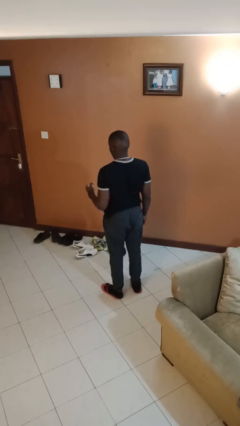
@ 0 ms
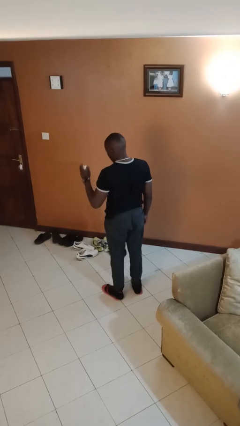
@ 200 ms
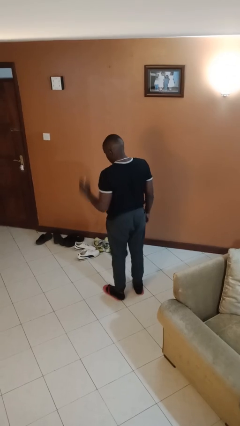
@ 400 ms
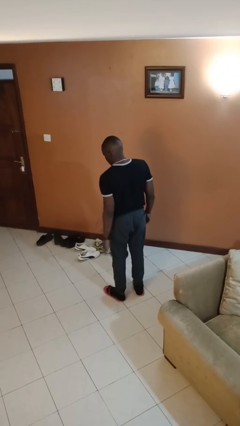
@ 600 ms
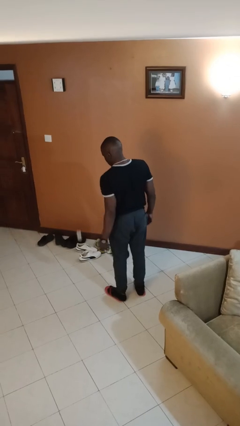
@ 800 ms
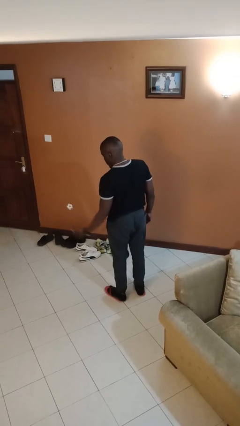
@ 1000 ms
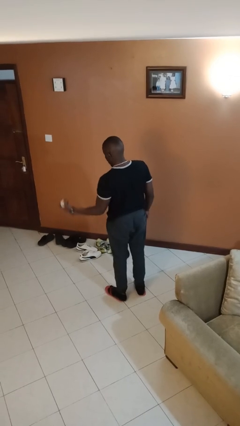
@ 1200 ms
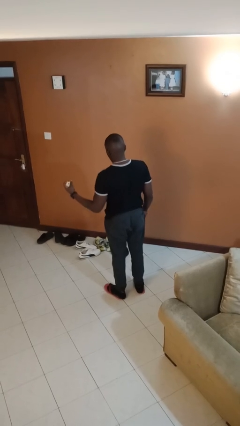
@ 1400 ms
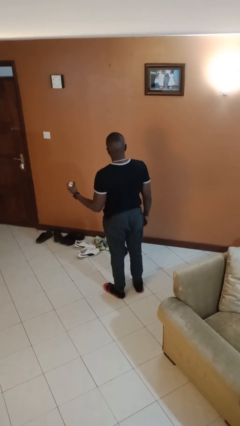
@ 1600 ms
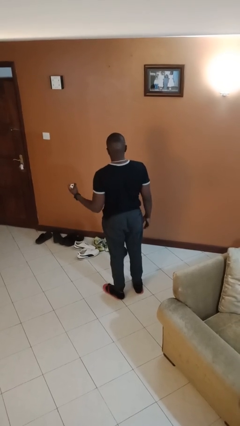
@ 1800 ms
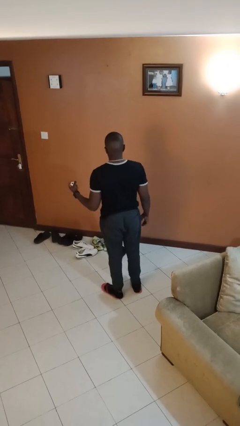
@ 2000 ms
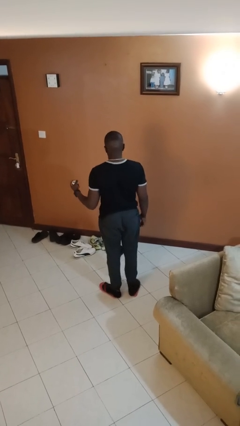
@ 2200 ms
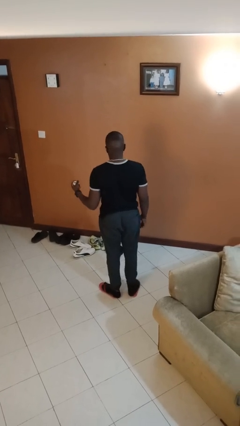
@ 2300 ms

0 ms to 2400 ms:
person bounces ball on floor

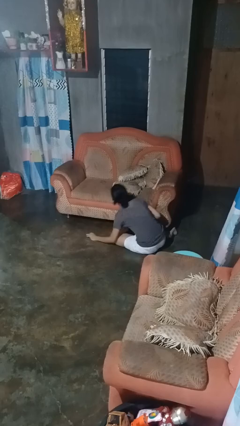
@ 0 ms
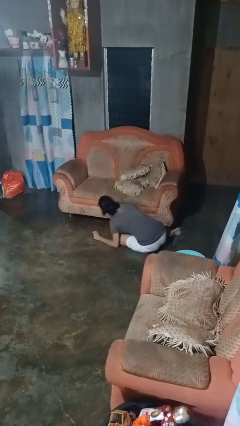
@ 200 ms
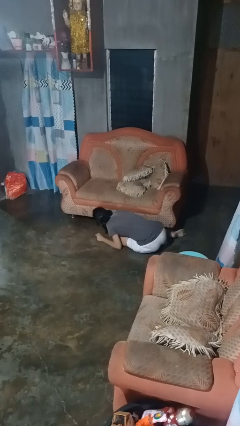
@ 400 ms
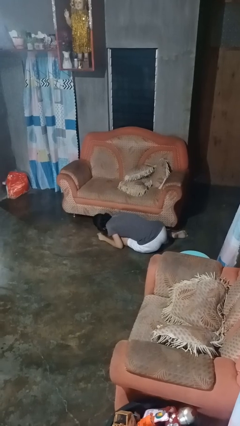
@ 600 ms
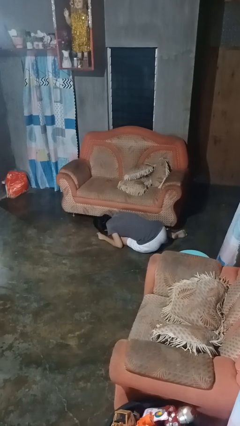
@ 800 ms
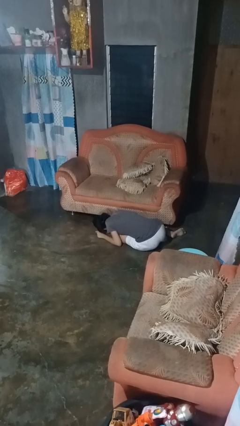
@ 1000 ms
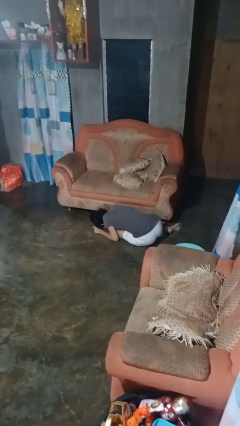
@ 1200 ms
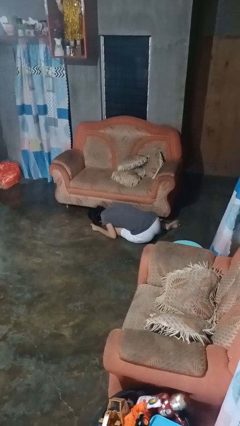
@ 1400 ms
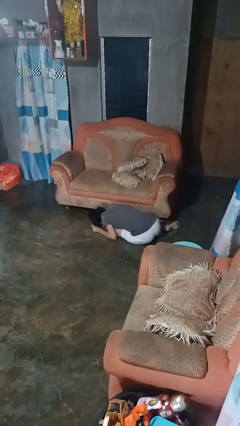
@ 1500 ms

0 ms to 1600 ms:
person searches under couch

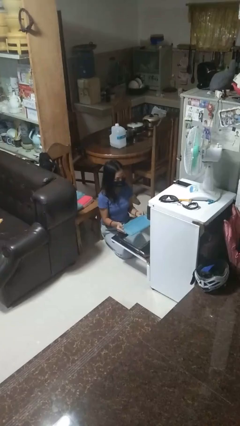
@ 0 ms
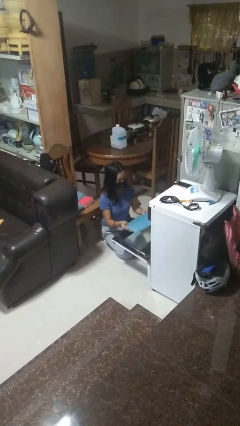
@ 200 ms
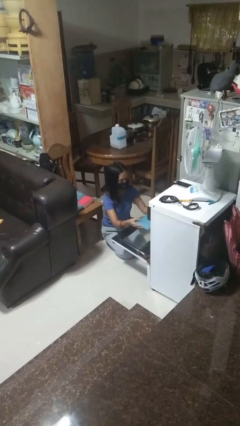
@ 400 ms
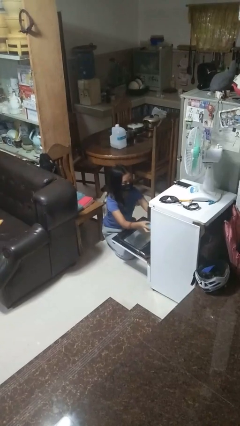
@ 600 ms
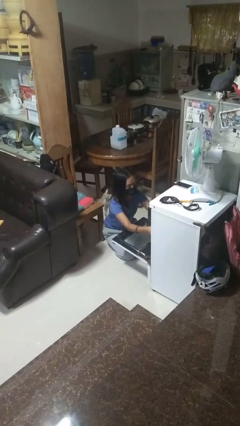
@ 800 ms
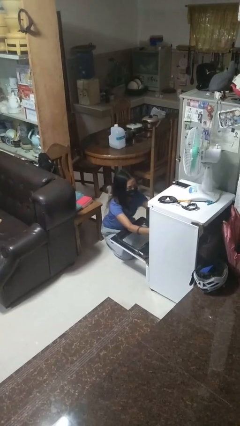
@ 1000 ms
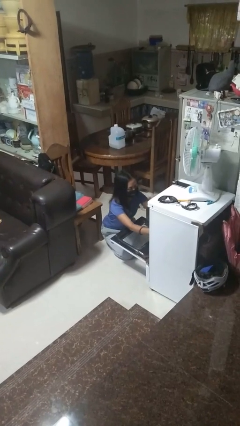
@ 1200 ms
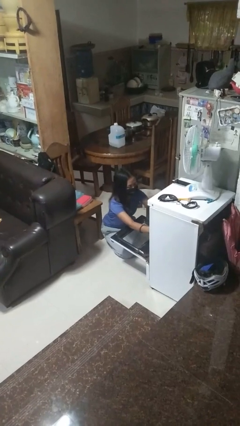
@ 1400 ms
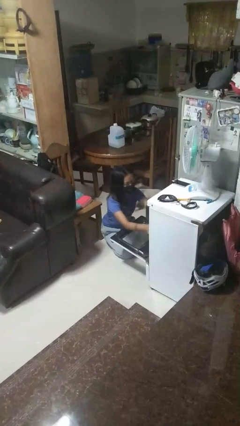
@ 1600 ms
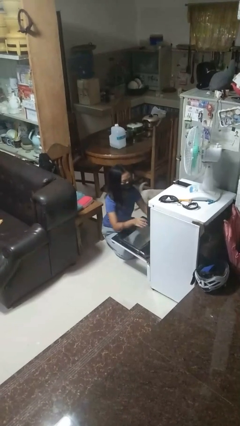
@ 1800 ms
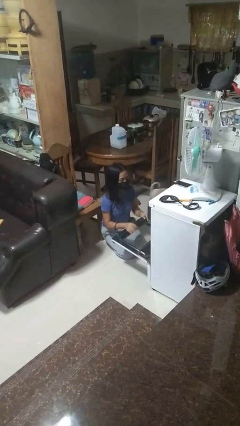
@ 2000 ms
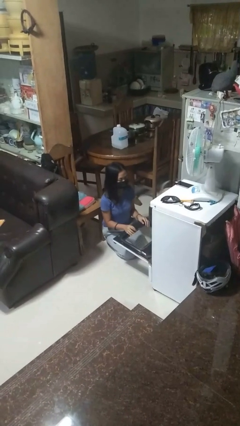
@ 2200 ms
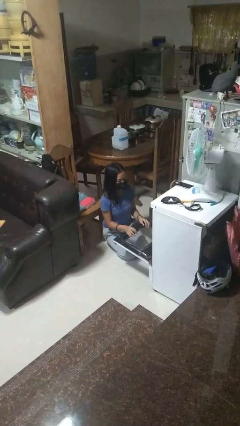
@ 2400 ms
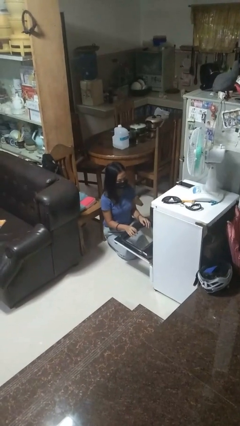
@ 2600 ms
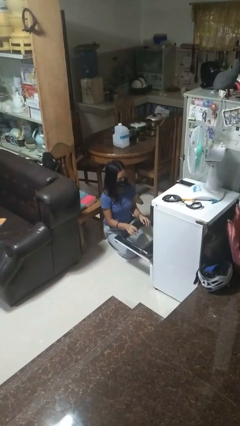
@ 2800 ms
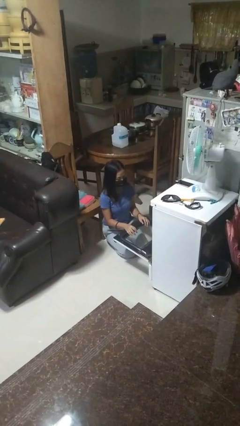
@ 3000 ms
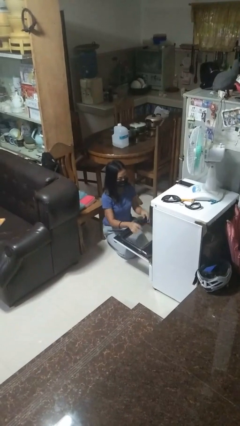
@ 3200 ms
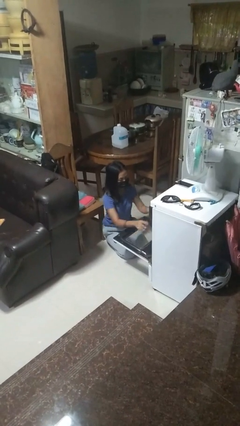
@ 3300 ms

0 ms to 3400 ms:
person puts object into oven

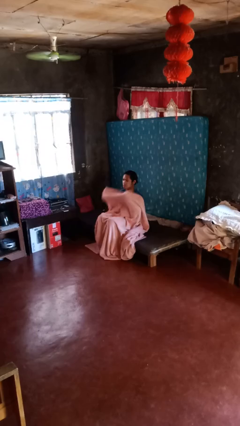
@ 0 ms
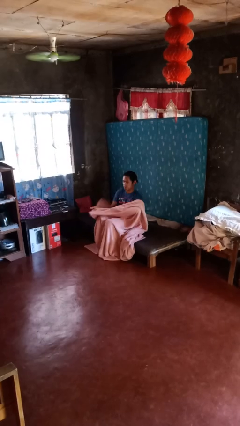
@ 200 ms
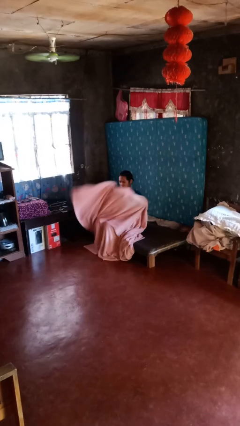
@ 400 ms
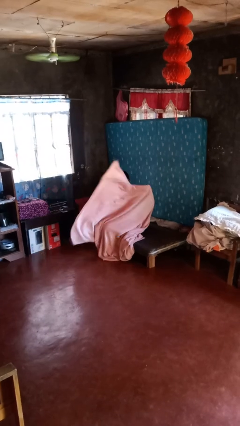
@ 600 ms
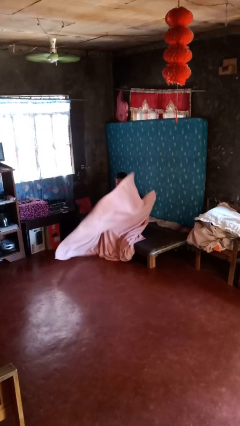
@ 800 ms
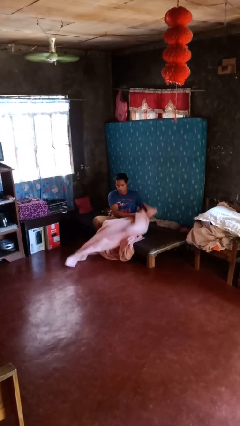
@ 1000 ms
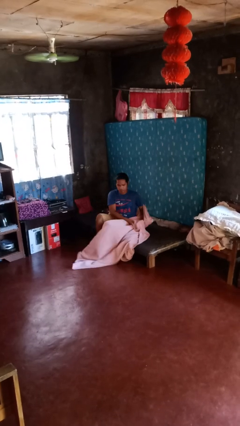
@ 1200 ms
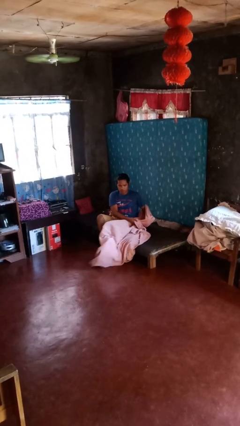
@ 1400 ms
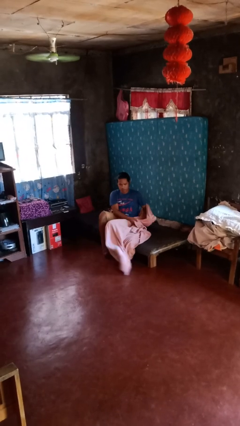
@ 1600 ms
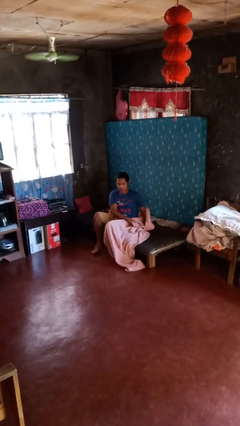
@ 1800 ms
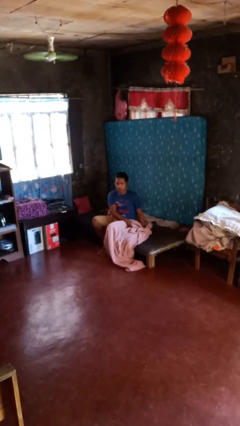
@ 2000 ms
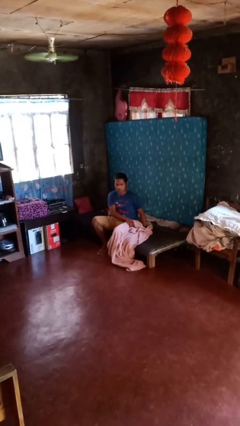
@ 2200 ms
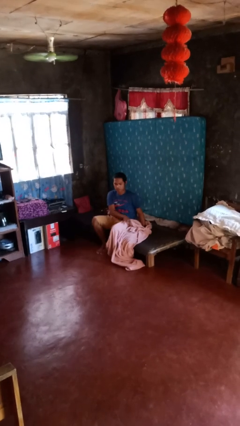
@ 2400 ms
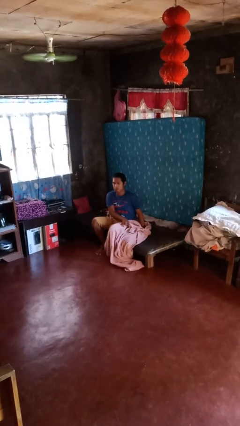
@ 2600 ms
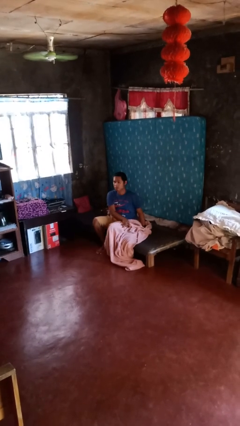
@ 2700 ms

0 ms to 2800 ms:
person uncovers with blanket

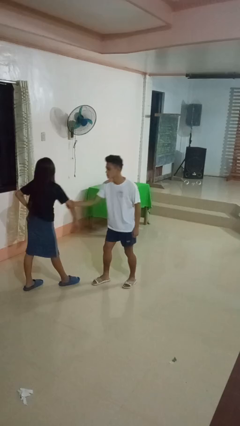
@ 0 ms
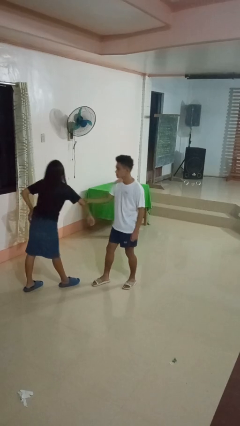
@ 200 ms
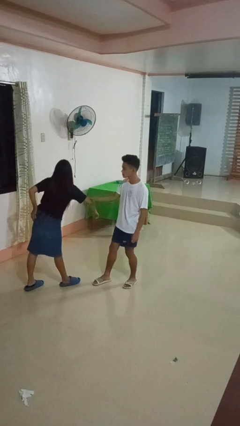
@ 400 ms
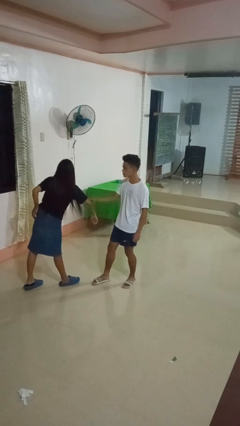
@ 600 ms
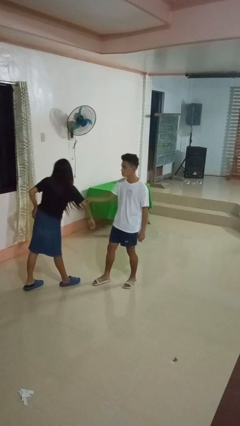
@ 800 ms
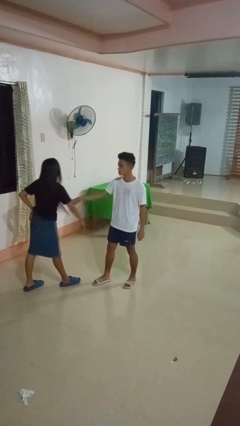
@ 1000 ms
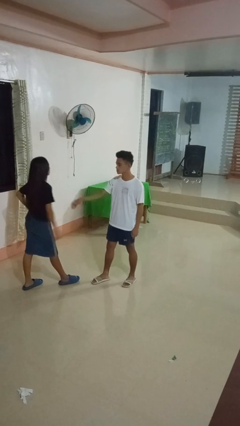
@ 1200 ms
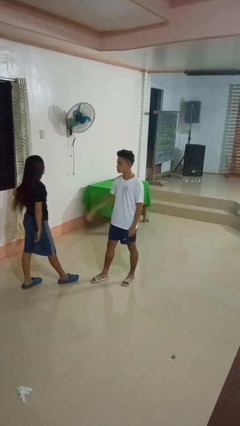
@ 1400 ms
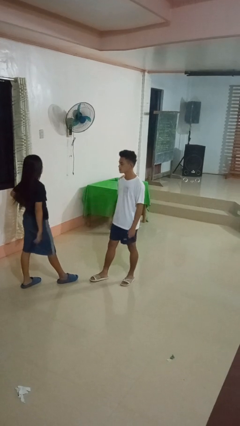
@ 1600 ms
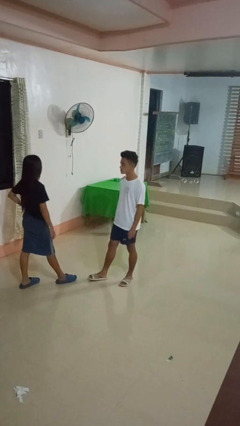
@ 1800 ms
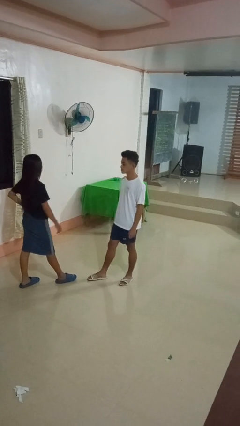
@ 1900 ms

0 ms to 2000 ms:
person grabs person by bicep

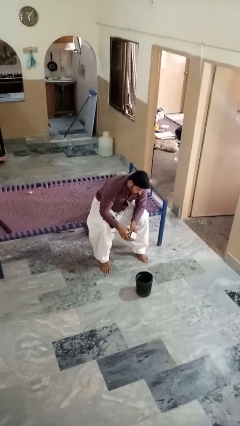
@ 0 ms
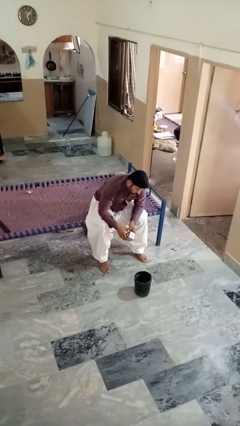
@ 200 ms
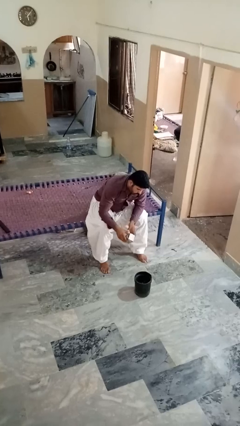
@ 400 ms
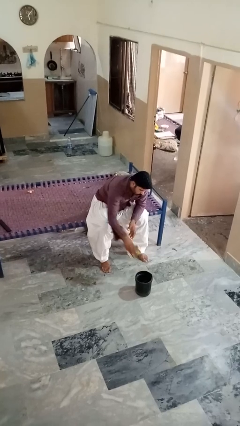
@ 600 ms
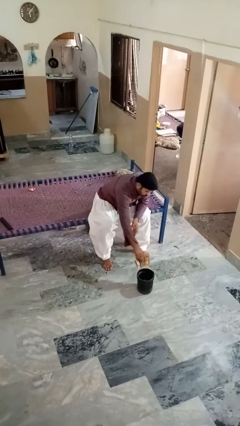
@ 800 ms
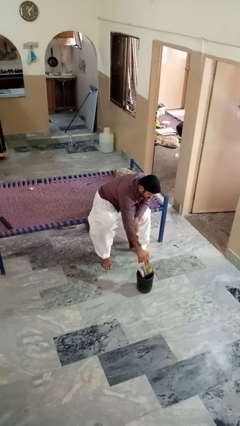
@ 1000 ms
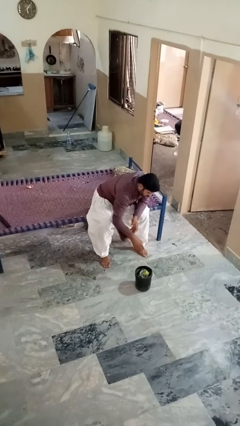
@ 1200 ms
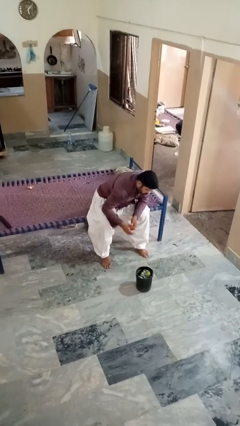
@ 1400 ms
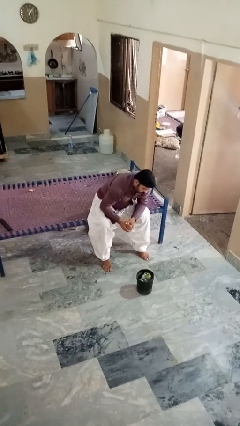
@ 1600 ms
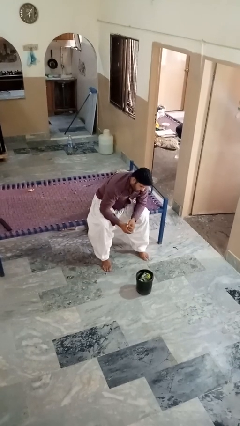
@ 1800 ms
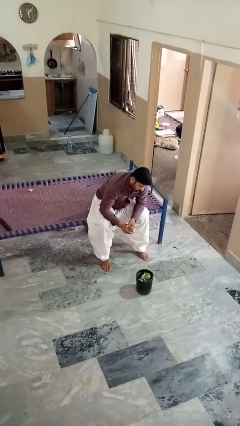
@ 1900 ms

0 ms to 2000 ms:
person puts object into basket

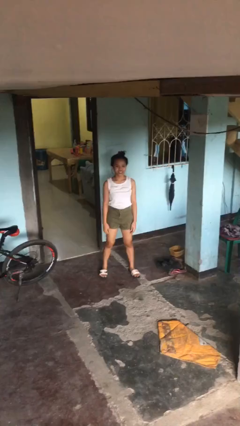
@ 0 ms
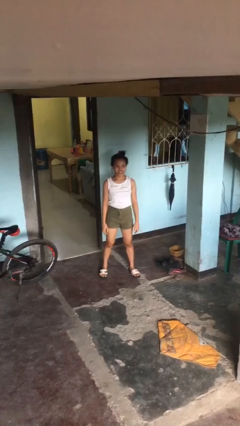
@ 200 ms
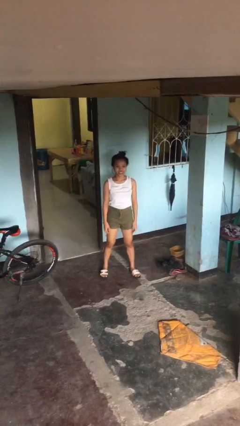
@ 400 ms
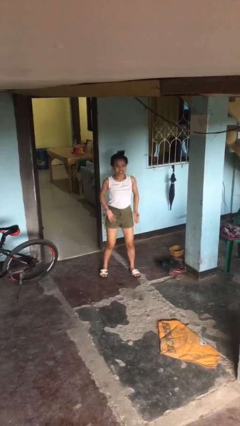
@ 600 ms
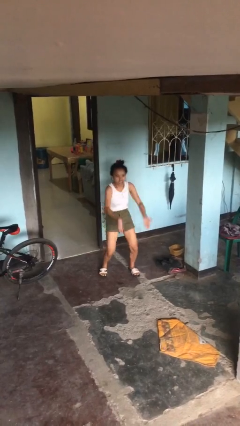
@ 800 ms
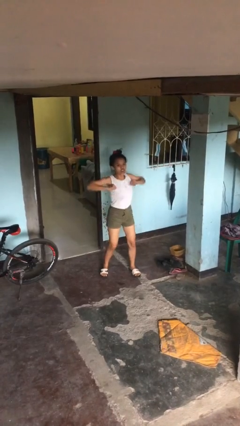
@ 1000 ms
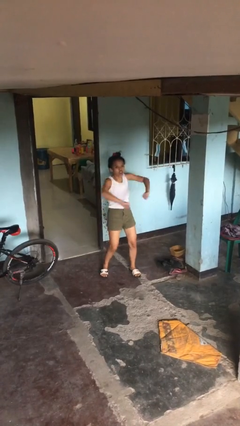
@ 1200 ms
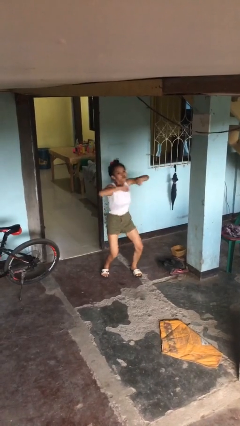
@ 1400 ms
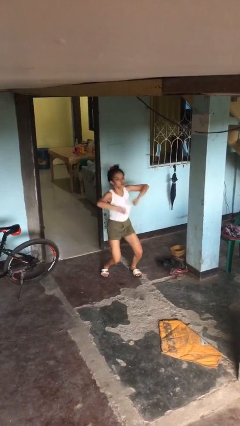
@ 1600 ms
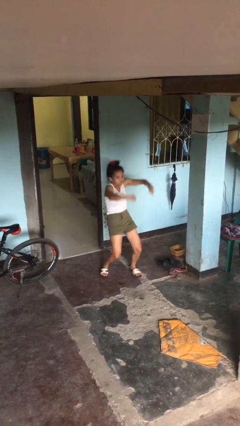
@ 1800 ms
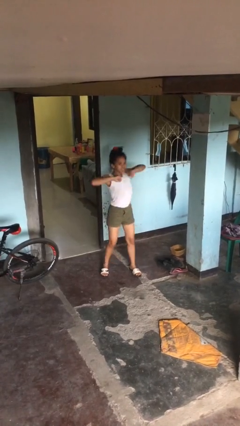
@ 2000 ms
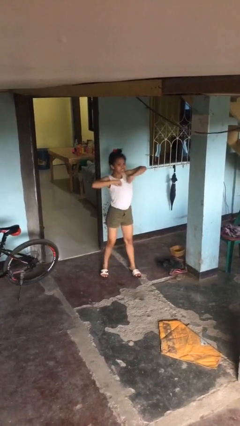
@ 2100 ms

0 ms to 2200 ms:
person dances in place

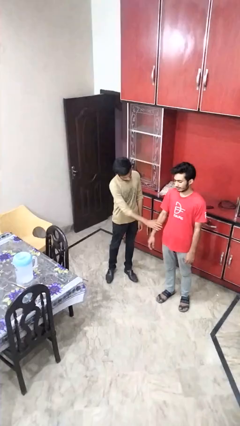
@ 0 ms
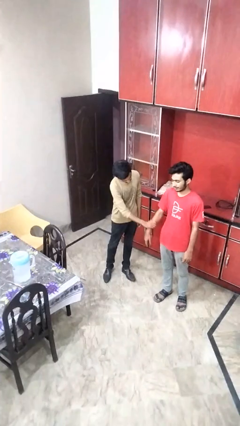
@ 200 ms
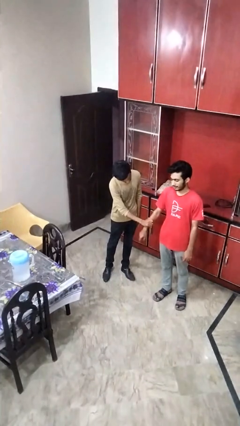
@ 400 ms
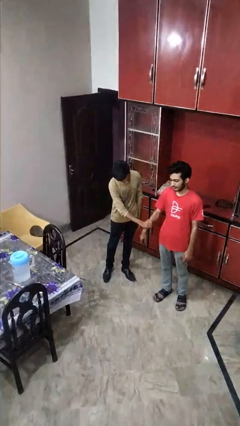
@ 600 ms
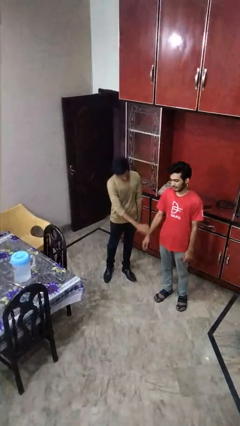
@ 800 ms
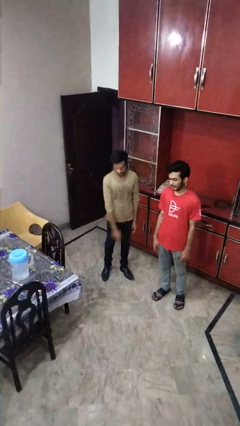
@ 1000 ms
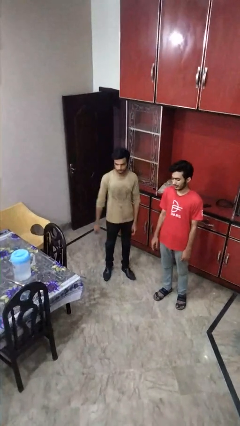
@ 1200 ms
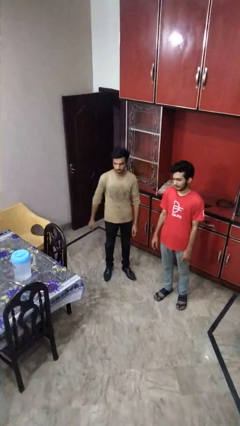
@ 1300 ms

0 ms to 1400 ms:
person grabs person by forearm
